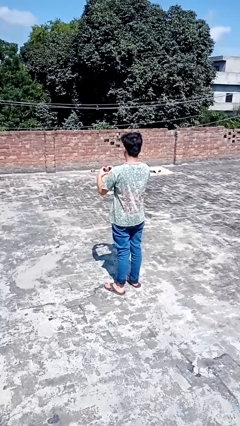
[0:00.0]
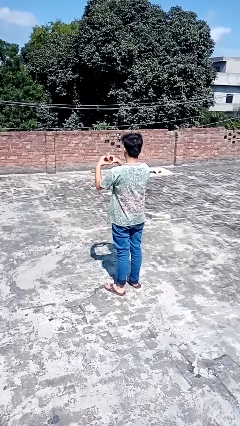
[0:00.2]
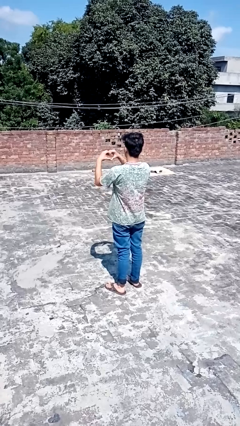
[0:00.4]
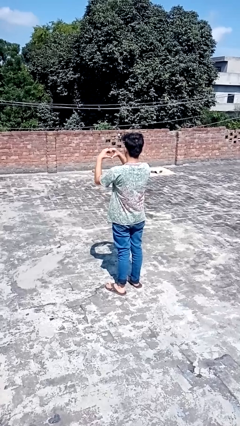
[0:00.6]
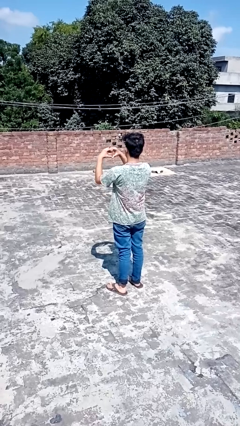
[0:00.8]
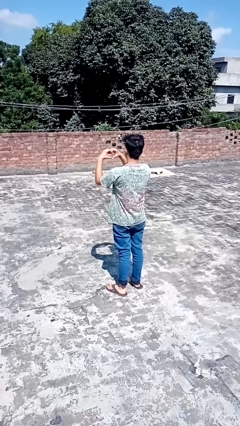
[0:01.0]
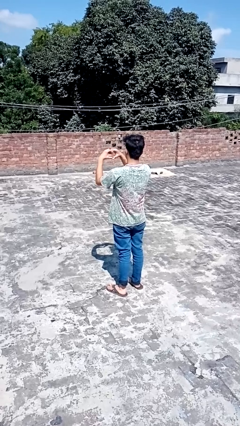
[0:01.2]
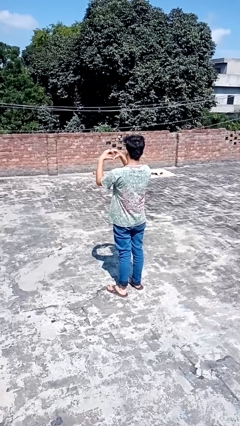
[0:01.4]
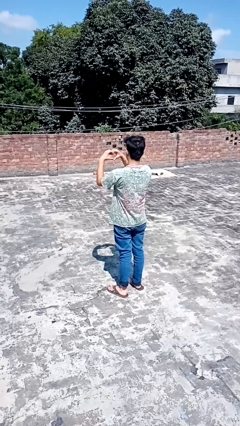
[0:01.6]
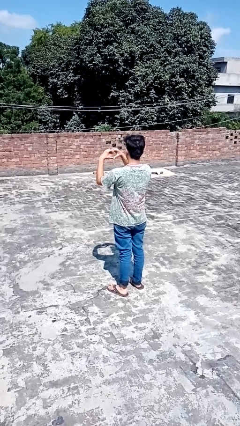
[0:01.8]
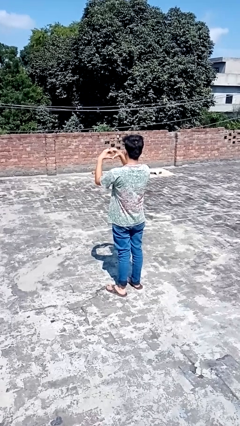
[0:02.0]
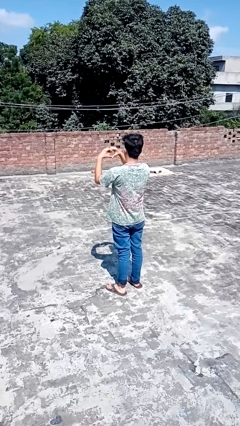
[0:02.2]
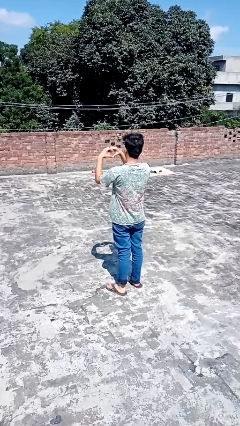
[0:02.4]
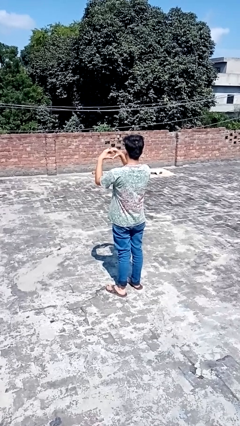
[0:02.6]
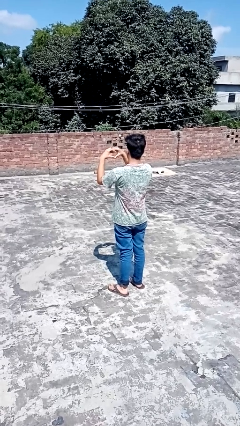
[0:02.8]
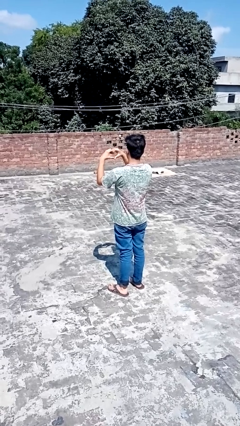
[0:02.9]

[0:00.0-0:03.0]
person gestures heart

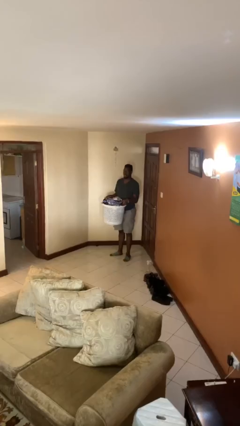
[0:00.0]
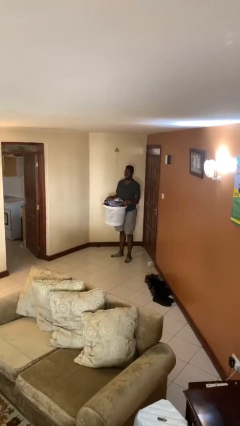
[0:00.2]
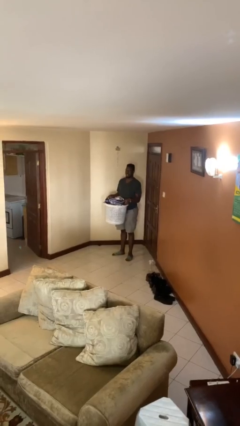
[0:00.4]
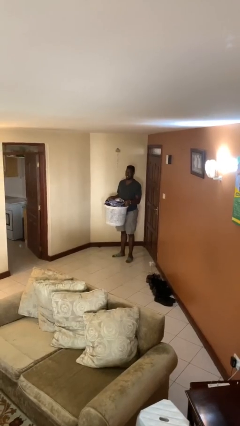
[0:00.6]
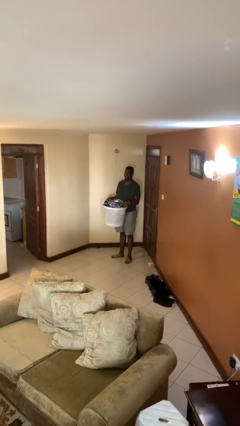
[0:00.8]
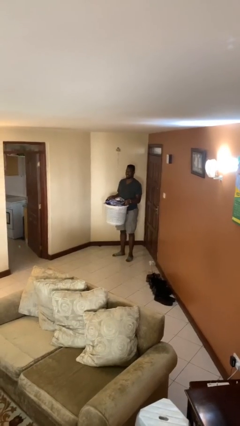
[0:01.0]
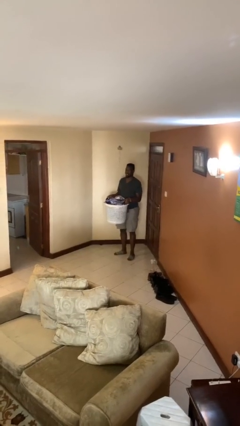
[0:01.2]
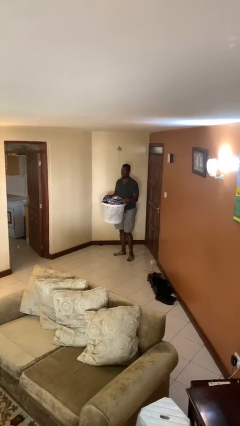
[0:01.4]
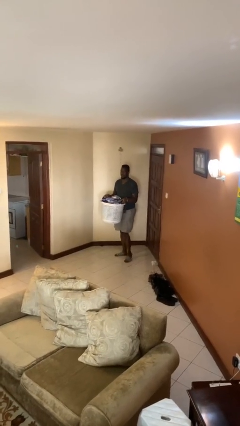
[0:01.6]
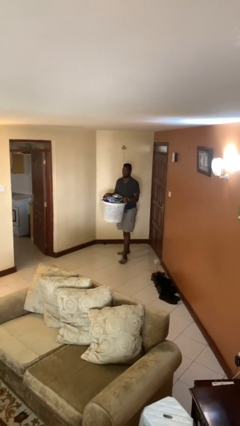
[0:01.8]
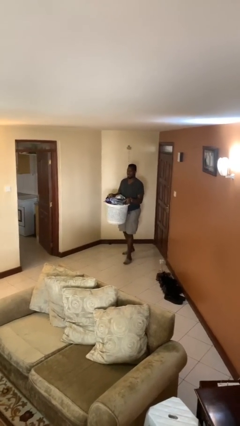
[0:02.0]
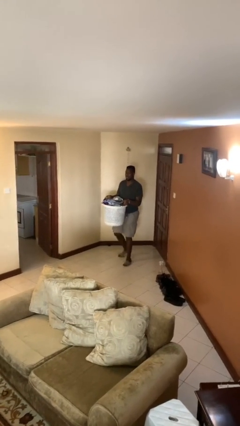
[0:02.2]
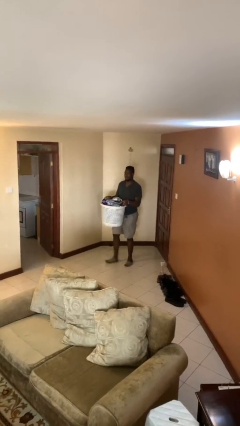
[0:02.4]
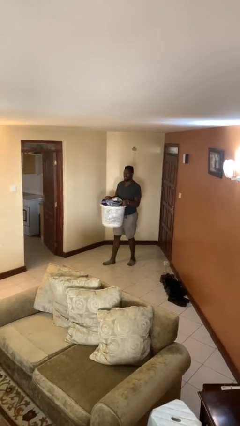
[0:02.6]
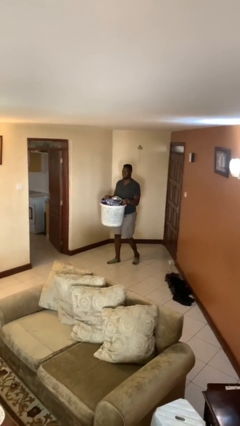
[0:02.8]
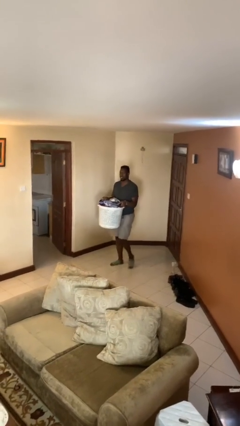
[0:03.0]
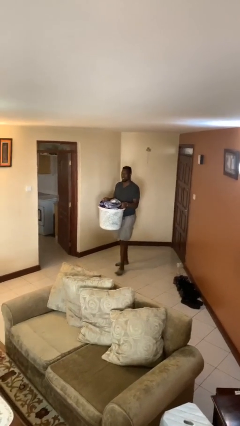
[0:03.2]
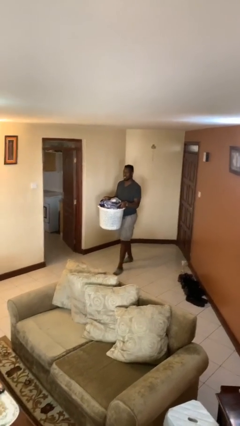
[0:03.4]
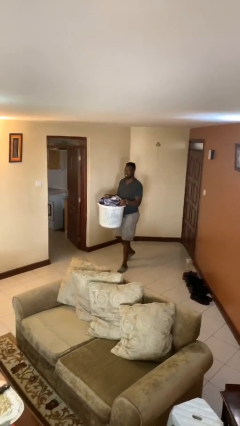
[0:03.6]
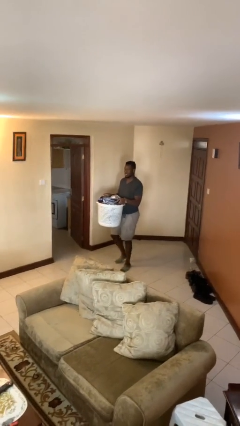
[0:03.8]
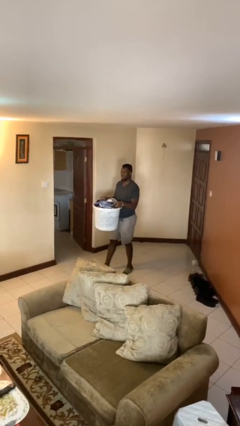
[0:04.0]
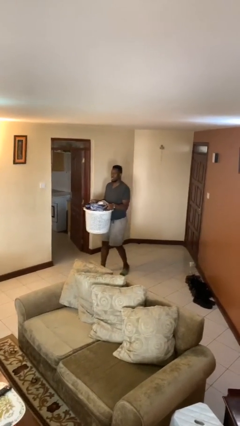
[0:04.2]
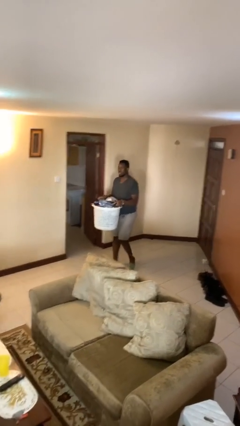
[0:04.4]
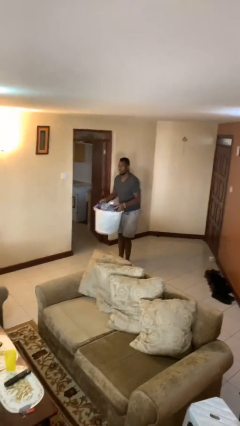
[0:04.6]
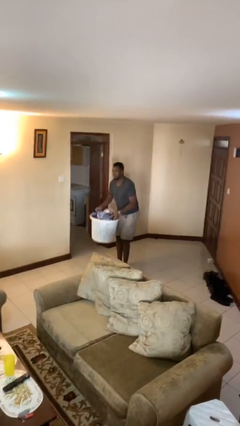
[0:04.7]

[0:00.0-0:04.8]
person carries heavy object

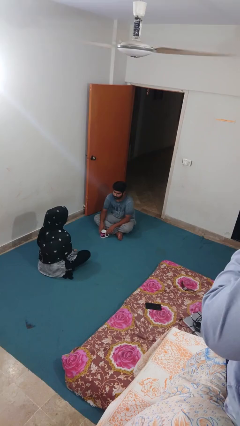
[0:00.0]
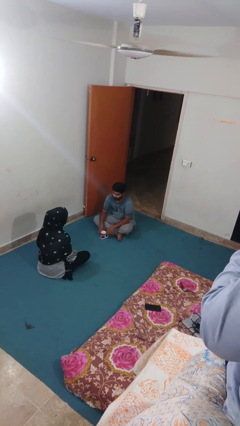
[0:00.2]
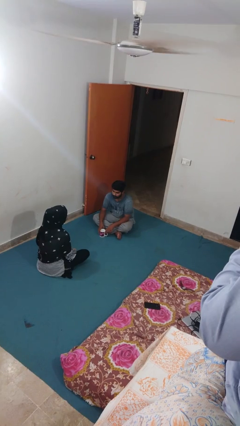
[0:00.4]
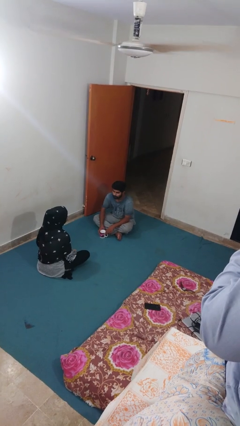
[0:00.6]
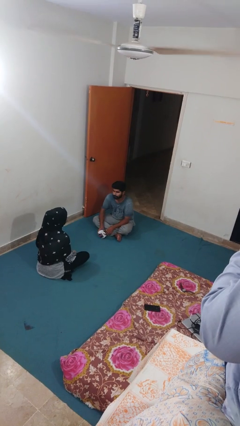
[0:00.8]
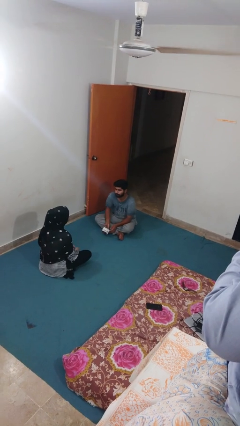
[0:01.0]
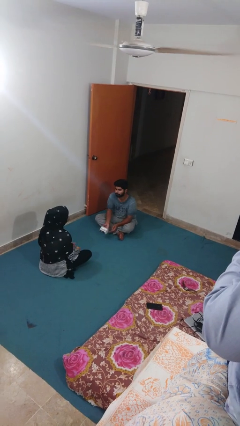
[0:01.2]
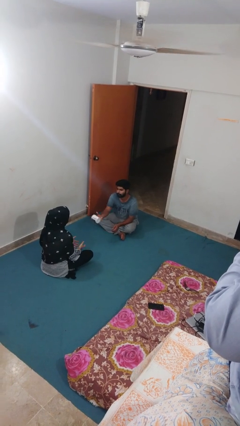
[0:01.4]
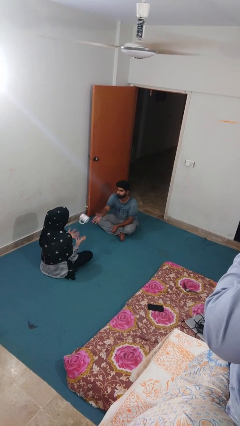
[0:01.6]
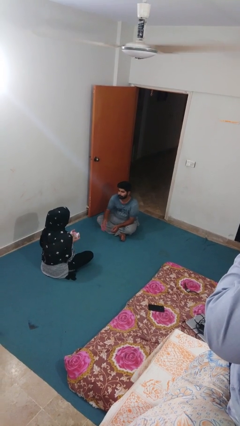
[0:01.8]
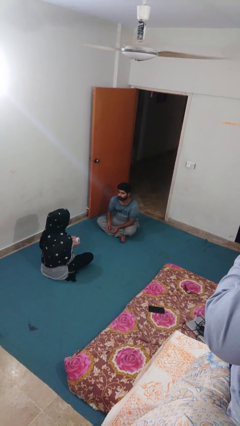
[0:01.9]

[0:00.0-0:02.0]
person throws object to person

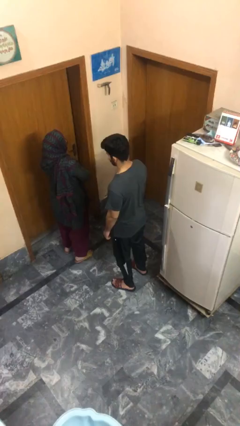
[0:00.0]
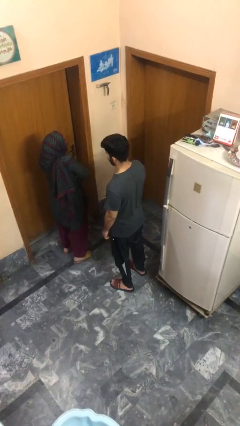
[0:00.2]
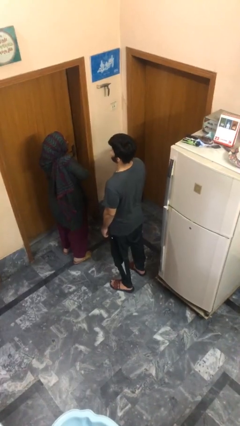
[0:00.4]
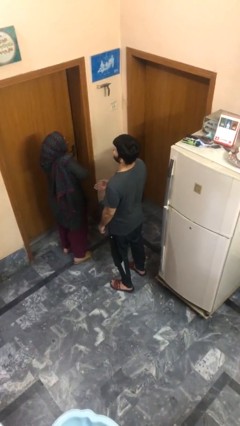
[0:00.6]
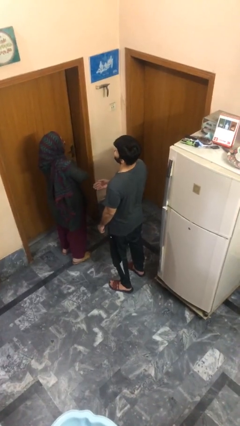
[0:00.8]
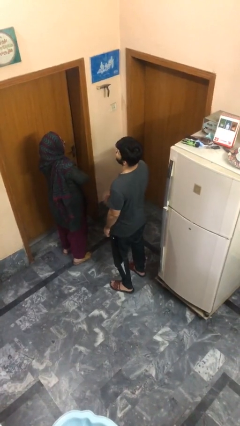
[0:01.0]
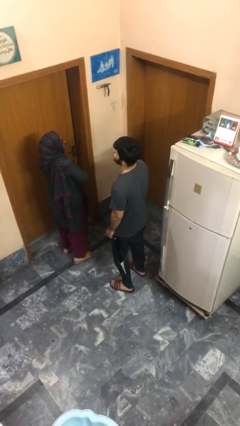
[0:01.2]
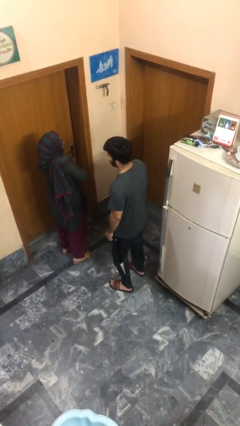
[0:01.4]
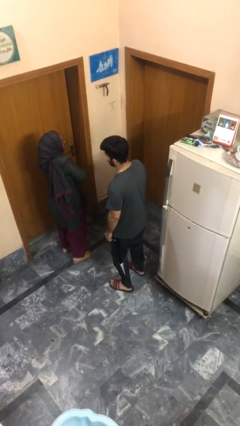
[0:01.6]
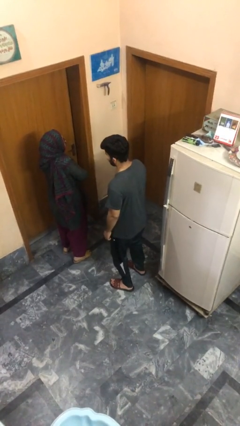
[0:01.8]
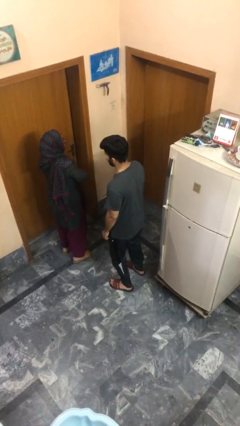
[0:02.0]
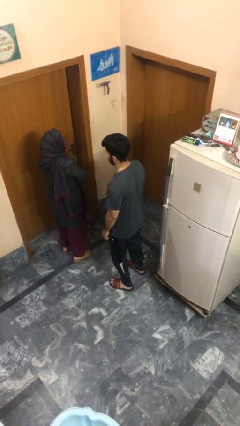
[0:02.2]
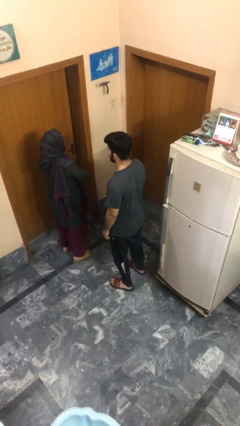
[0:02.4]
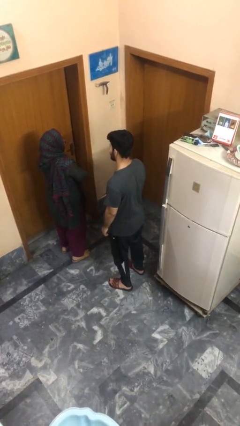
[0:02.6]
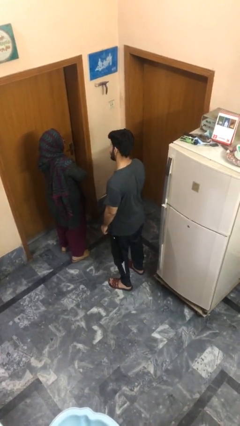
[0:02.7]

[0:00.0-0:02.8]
person laughs with person

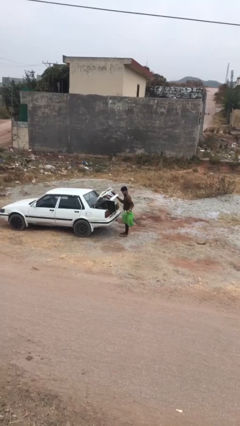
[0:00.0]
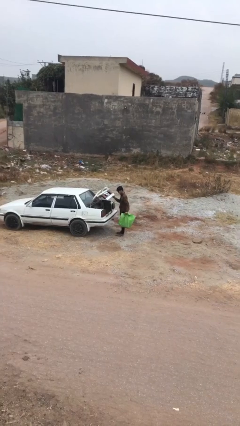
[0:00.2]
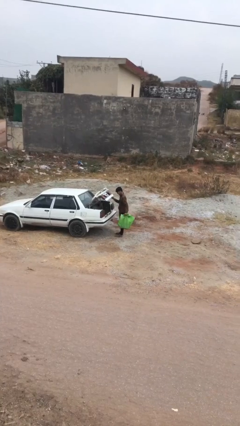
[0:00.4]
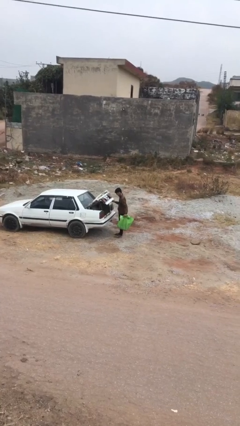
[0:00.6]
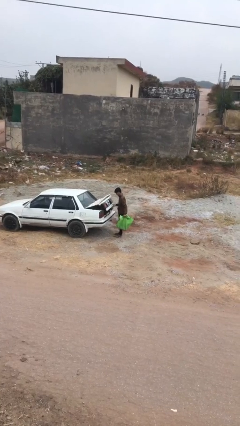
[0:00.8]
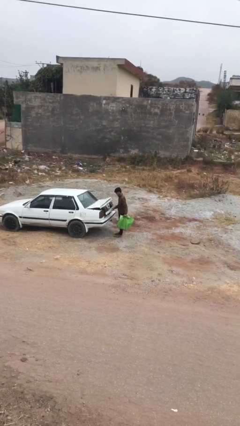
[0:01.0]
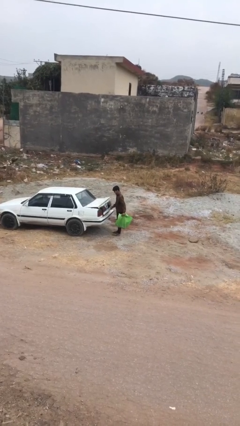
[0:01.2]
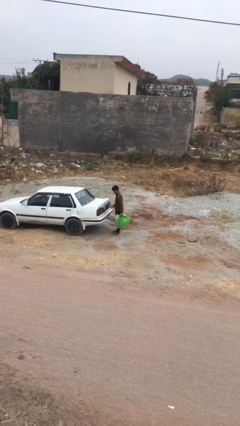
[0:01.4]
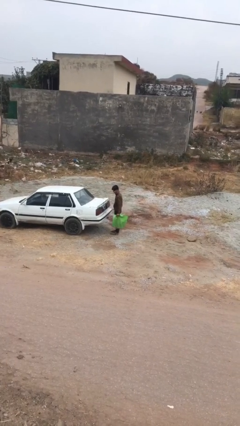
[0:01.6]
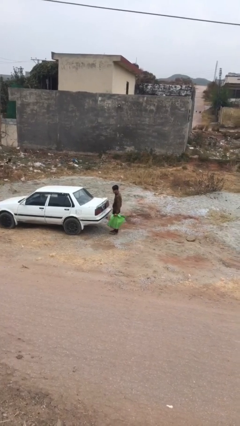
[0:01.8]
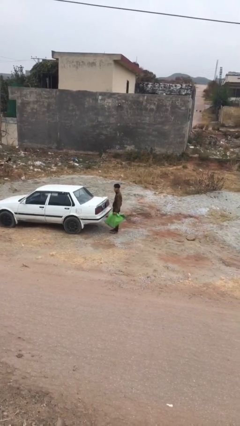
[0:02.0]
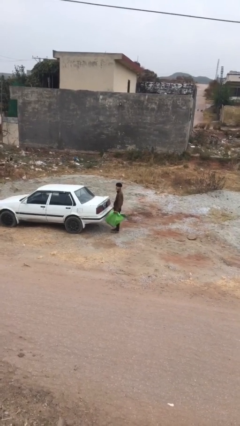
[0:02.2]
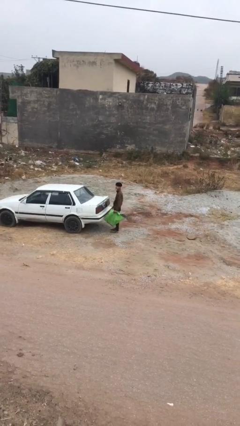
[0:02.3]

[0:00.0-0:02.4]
person closes car trunk

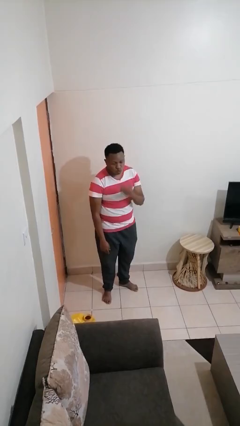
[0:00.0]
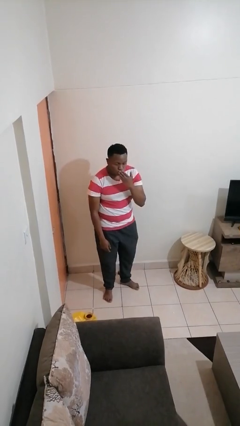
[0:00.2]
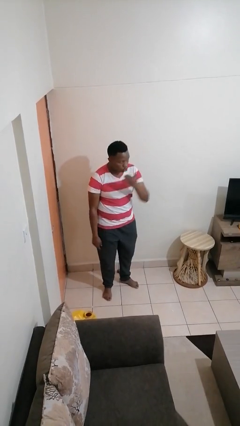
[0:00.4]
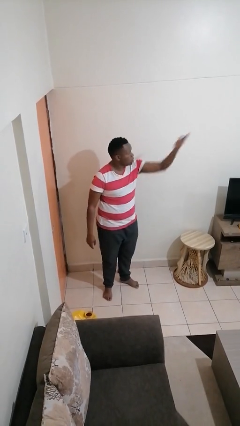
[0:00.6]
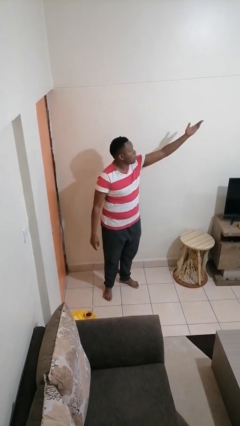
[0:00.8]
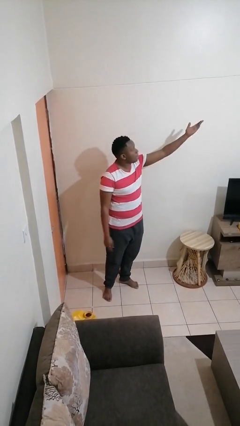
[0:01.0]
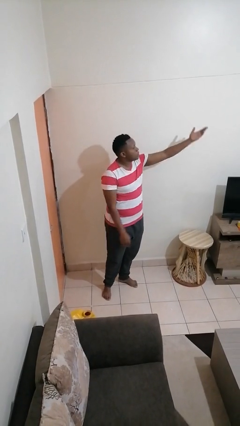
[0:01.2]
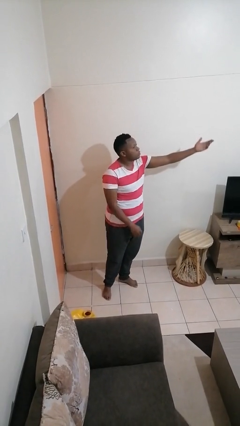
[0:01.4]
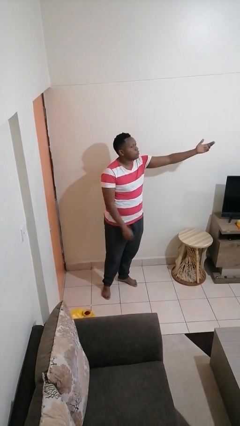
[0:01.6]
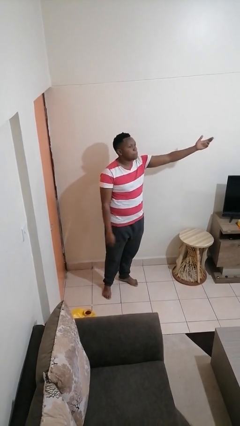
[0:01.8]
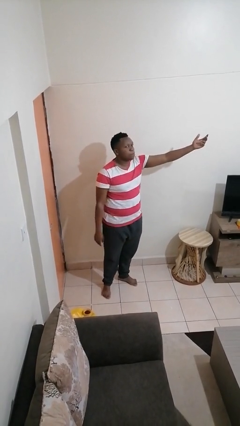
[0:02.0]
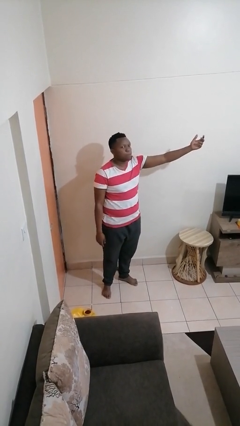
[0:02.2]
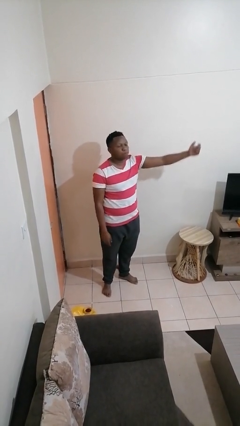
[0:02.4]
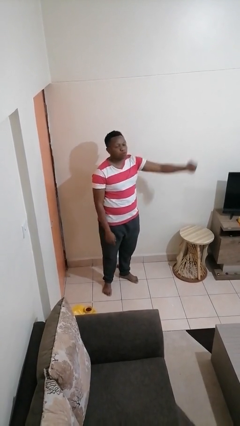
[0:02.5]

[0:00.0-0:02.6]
person gestures blow kiss
